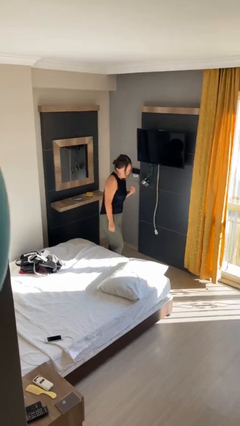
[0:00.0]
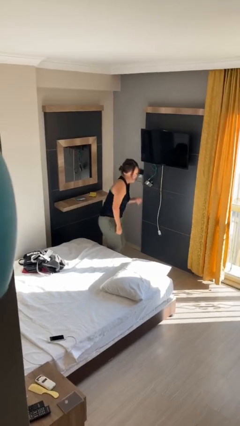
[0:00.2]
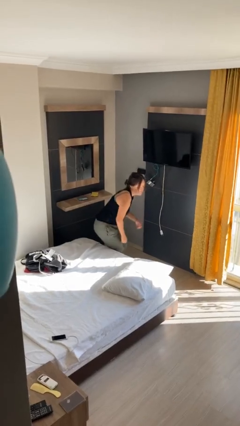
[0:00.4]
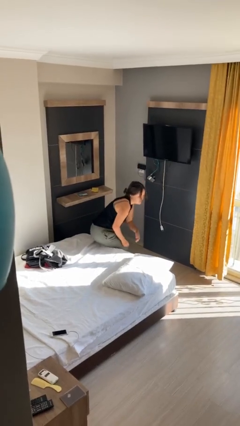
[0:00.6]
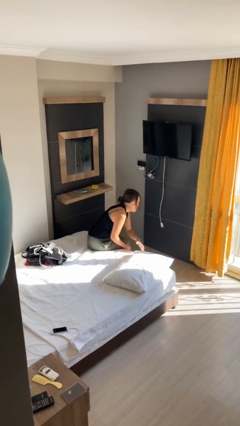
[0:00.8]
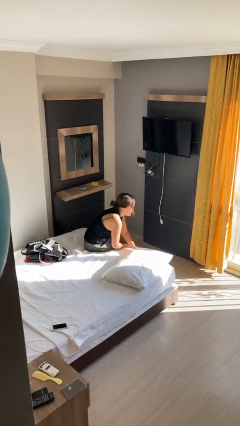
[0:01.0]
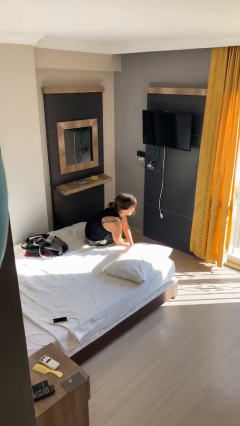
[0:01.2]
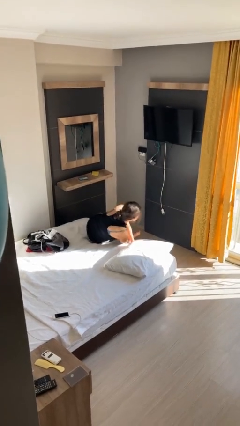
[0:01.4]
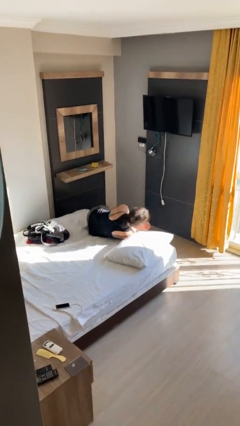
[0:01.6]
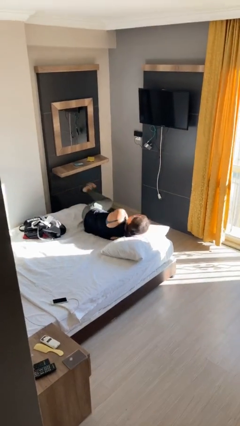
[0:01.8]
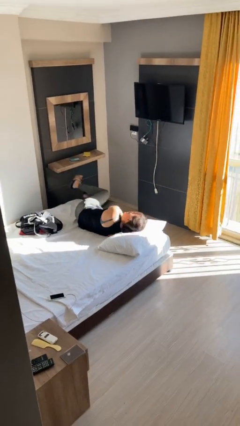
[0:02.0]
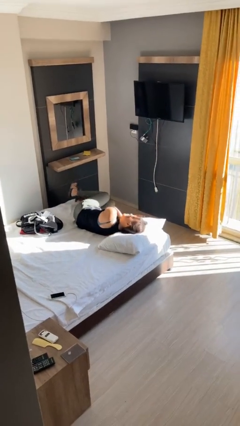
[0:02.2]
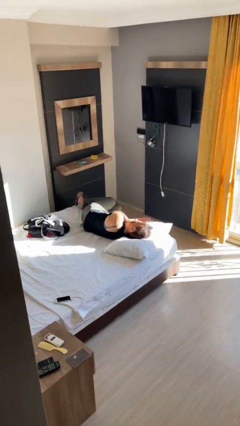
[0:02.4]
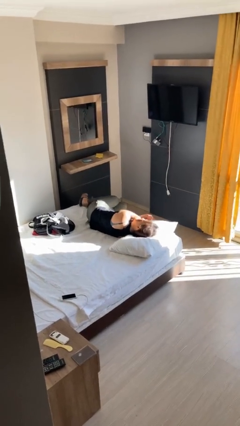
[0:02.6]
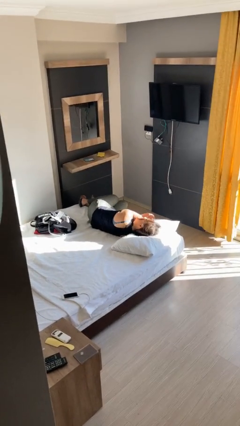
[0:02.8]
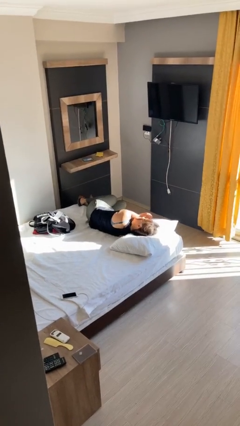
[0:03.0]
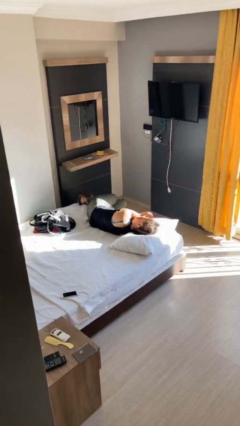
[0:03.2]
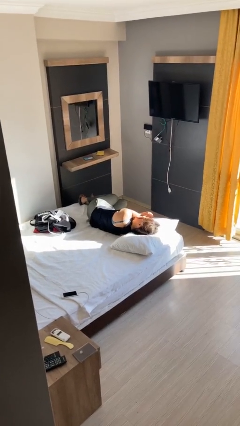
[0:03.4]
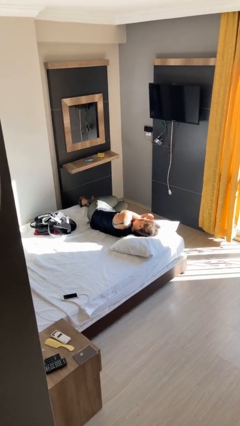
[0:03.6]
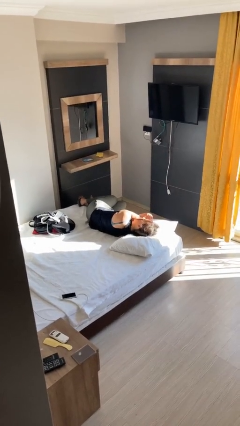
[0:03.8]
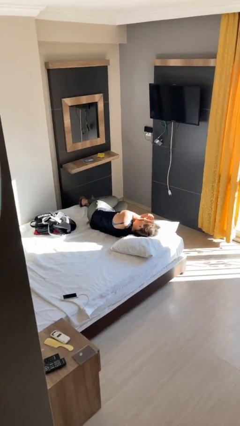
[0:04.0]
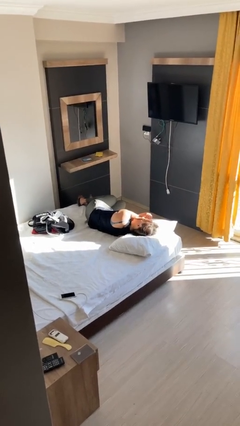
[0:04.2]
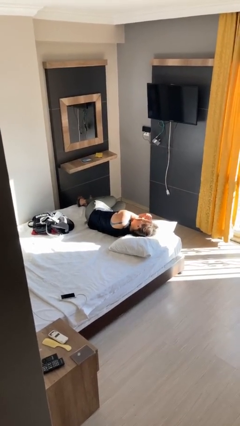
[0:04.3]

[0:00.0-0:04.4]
person lies down on bed

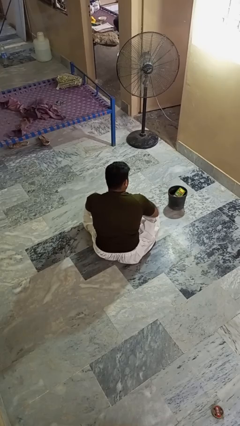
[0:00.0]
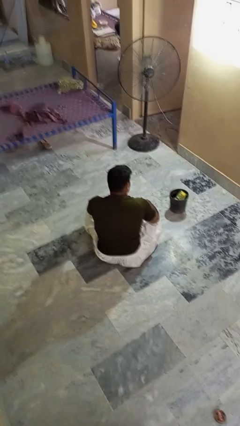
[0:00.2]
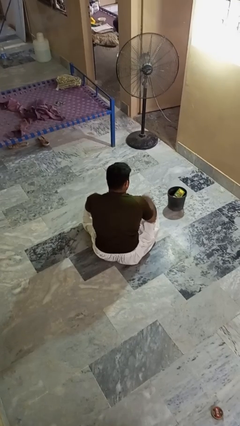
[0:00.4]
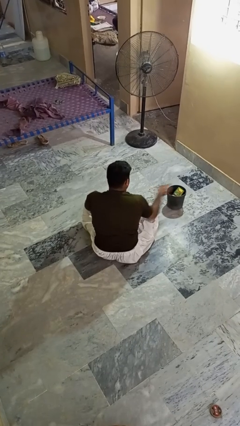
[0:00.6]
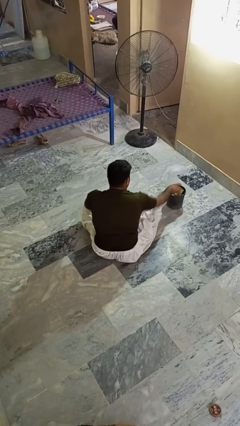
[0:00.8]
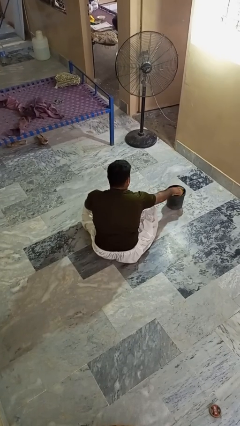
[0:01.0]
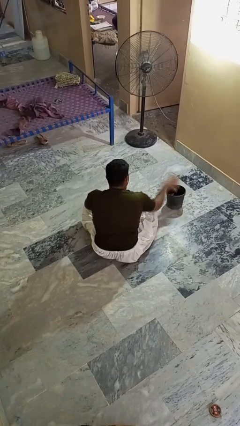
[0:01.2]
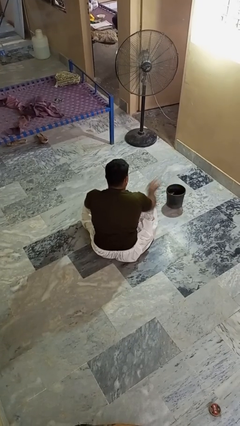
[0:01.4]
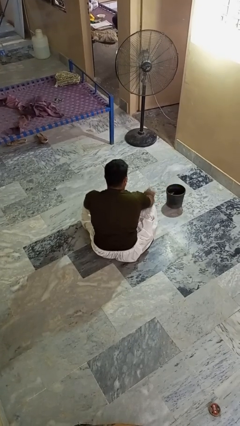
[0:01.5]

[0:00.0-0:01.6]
person takes object from basket

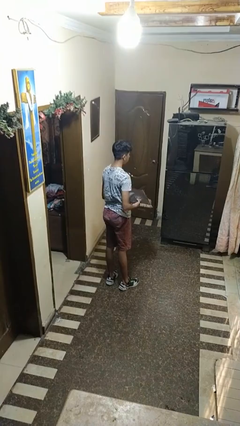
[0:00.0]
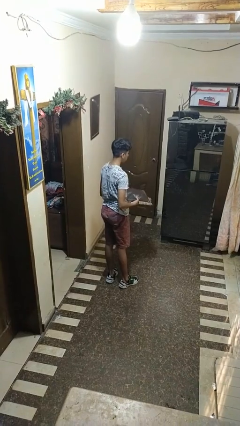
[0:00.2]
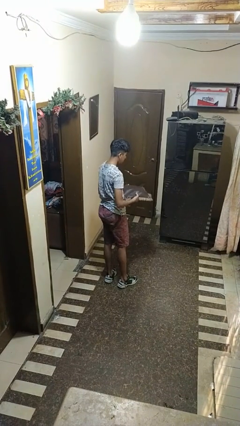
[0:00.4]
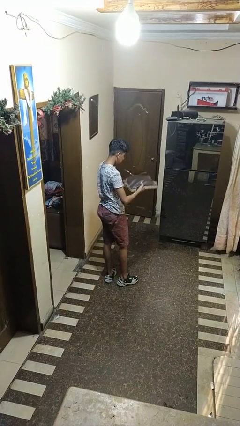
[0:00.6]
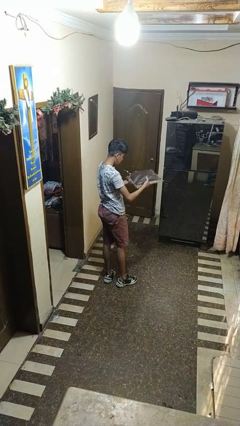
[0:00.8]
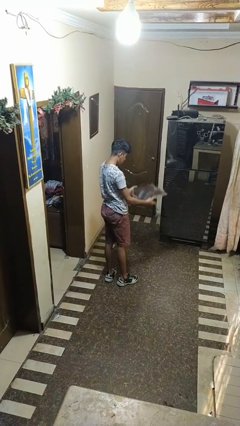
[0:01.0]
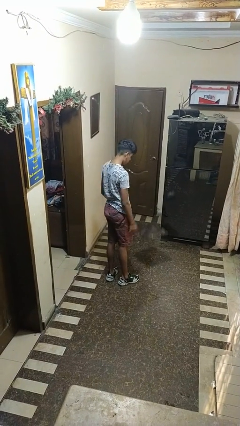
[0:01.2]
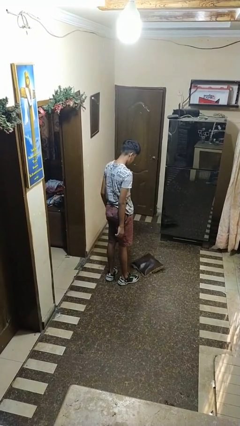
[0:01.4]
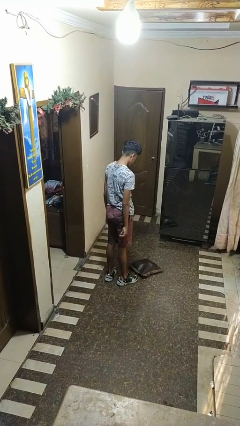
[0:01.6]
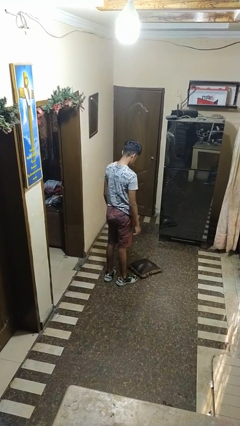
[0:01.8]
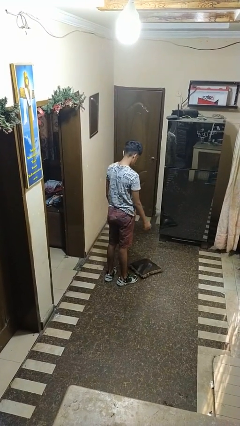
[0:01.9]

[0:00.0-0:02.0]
person throws object to ground

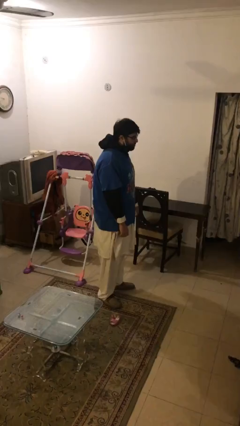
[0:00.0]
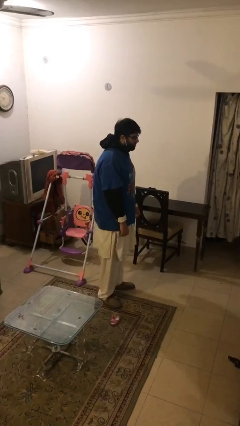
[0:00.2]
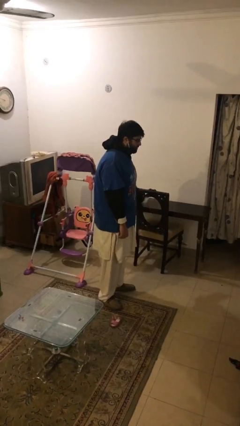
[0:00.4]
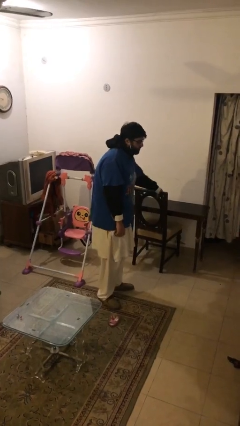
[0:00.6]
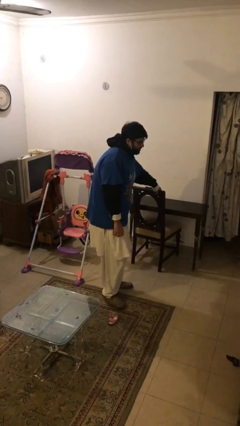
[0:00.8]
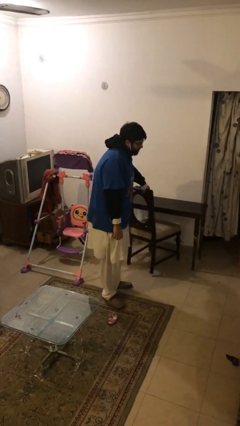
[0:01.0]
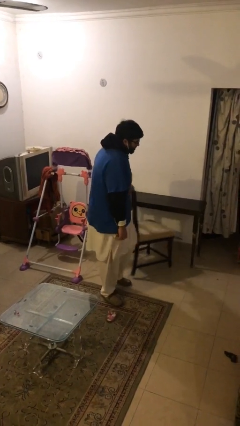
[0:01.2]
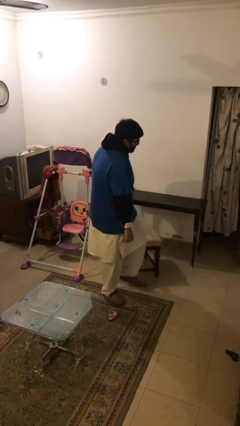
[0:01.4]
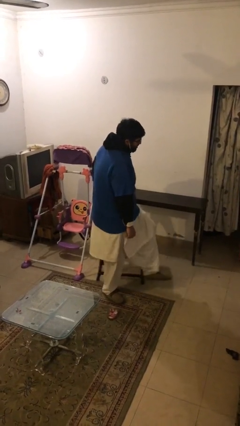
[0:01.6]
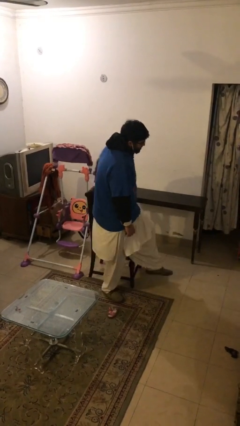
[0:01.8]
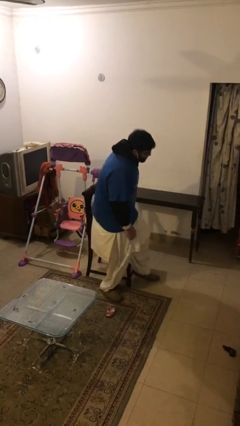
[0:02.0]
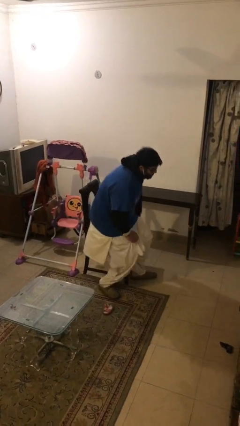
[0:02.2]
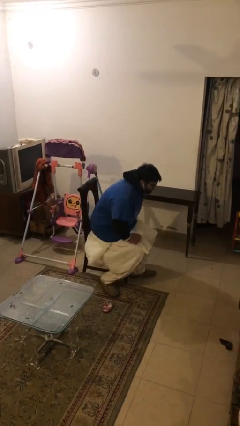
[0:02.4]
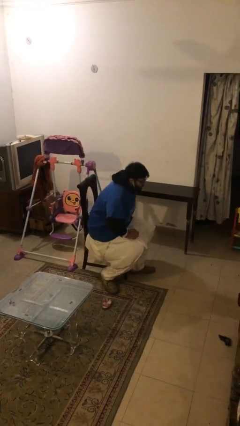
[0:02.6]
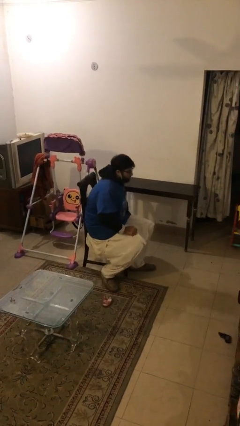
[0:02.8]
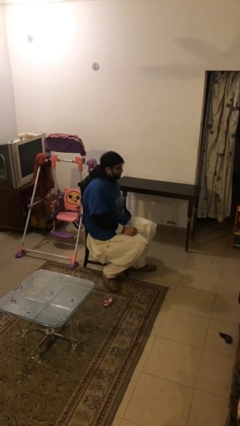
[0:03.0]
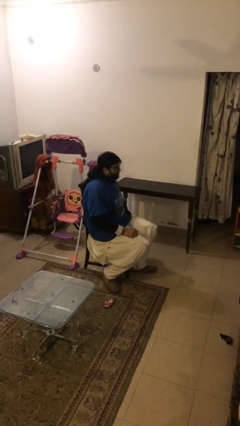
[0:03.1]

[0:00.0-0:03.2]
person sits down

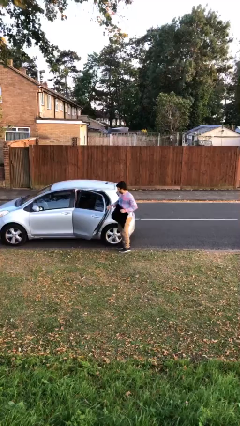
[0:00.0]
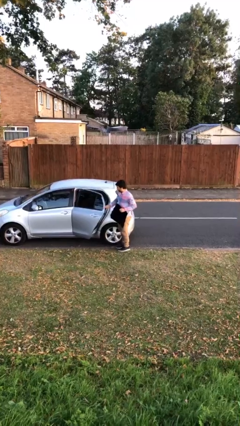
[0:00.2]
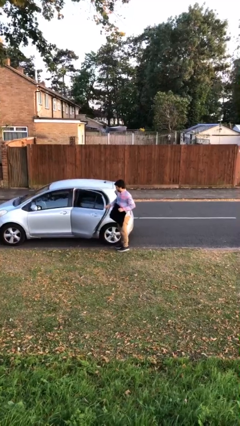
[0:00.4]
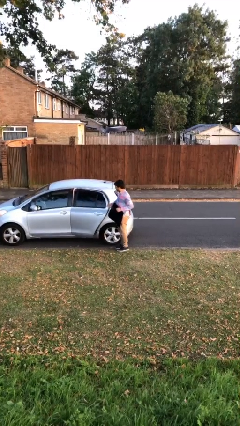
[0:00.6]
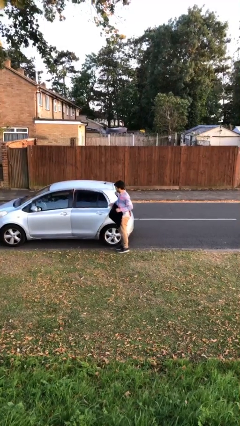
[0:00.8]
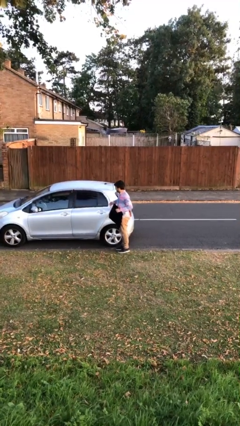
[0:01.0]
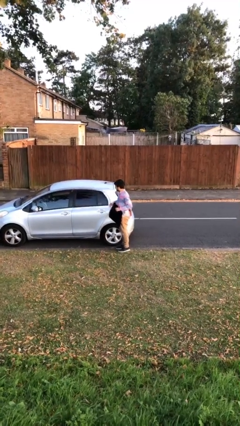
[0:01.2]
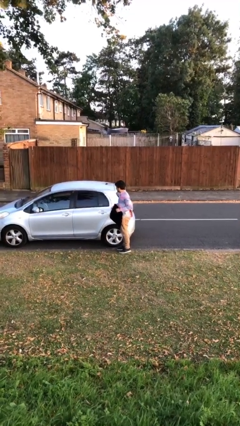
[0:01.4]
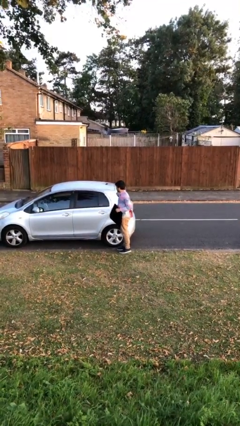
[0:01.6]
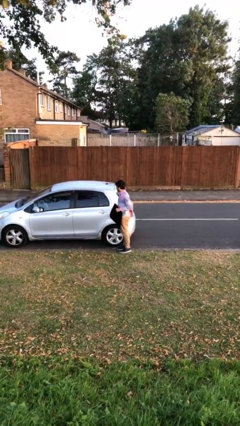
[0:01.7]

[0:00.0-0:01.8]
person closes car door

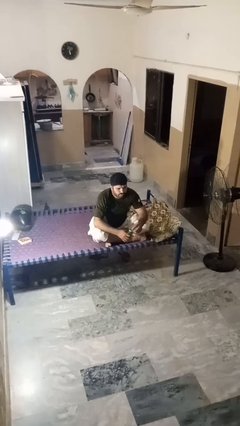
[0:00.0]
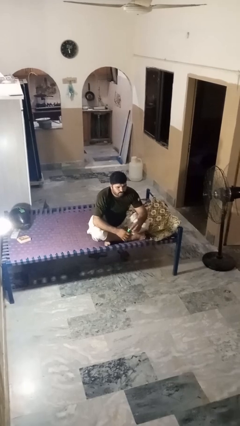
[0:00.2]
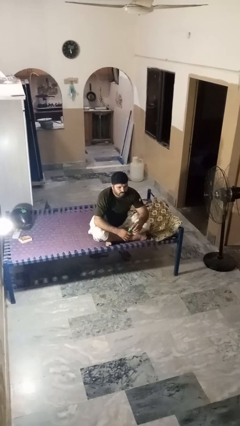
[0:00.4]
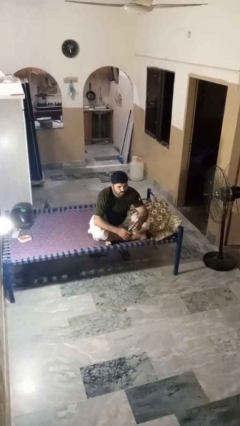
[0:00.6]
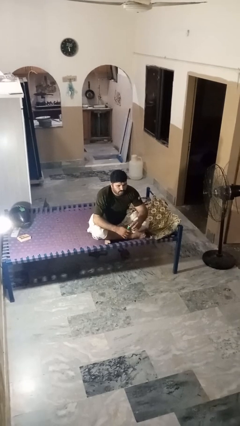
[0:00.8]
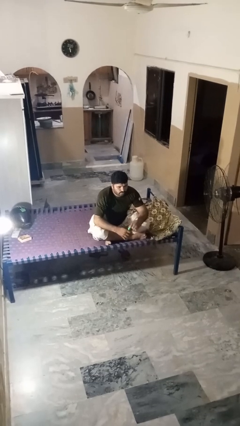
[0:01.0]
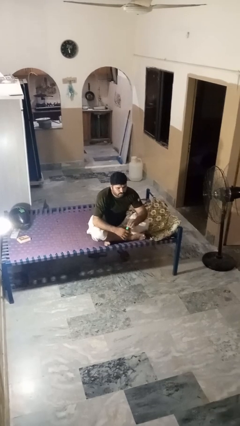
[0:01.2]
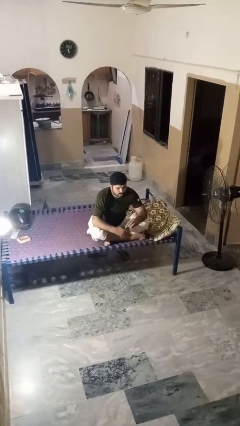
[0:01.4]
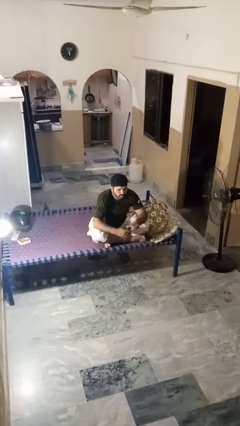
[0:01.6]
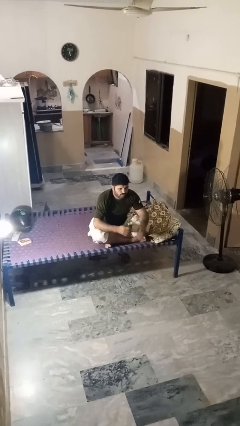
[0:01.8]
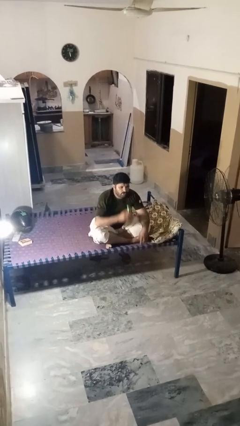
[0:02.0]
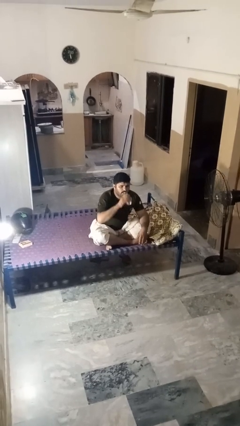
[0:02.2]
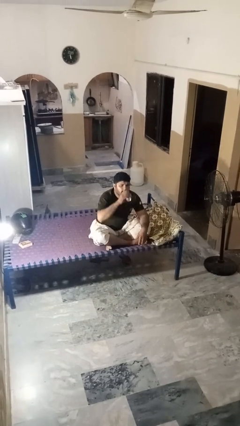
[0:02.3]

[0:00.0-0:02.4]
person opens beverage can

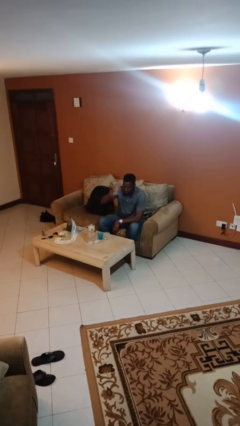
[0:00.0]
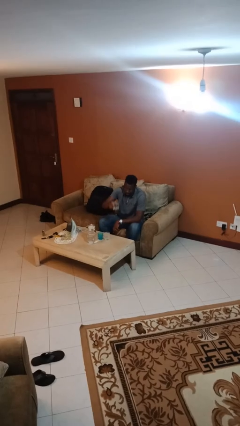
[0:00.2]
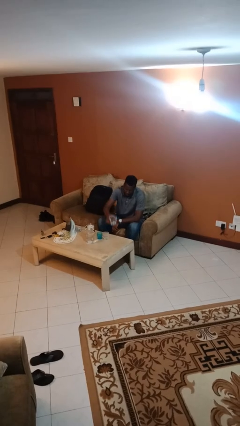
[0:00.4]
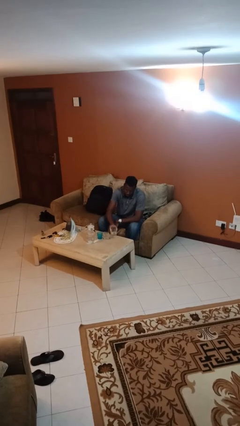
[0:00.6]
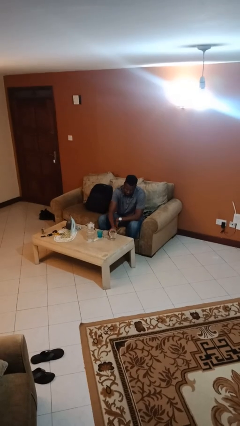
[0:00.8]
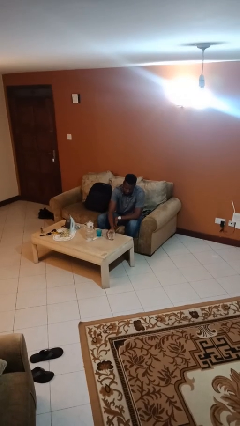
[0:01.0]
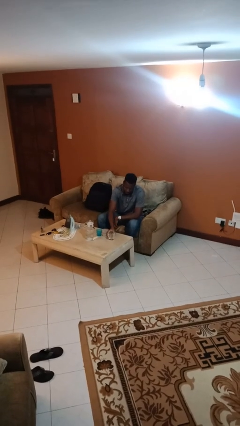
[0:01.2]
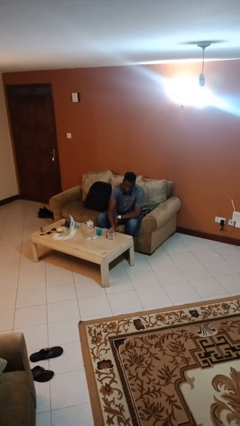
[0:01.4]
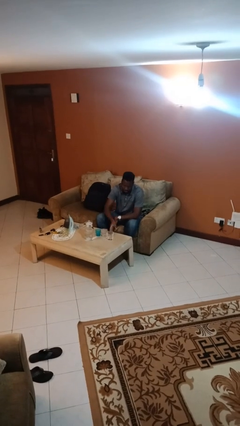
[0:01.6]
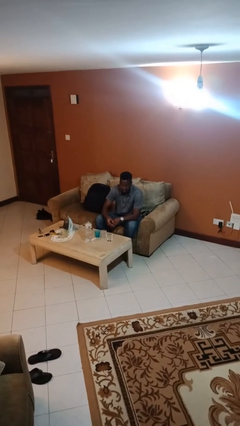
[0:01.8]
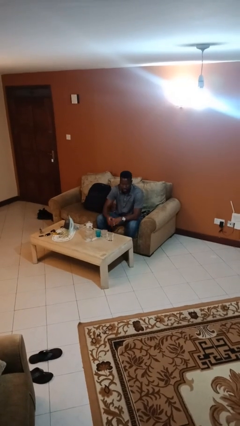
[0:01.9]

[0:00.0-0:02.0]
person puts down object on table
